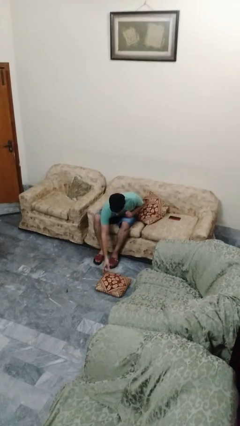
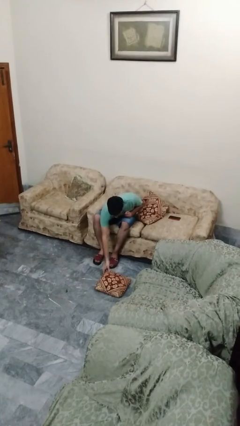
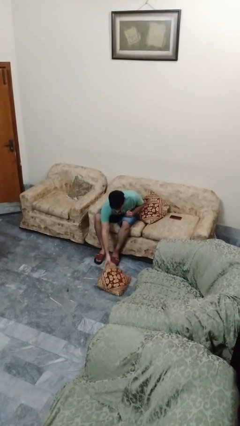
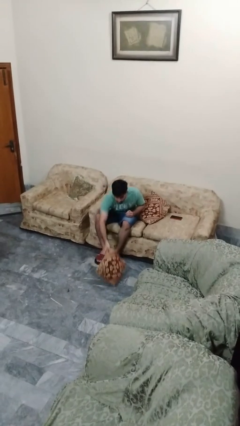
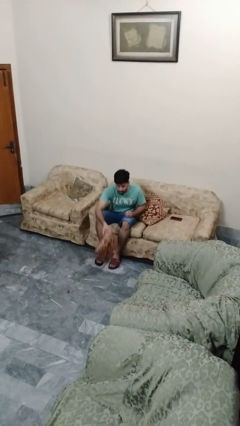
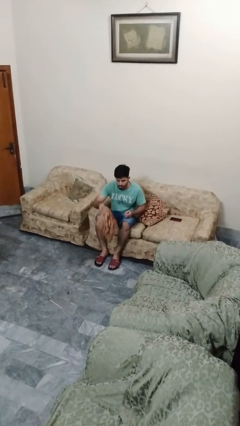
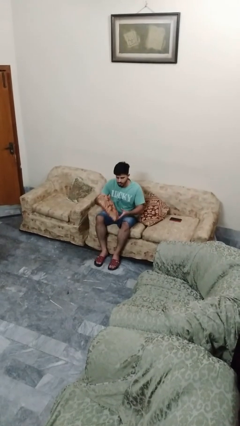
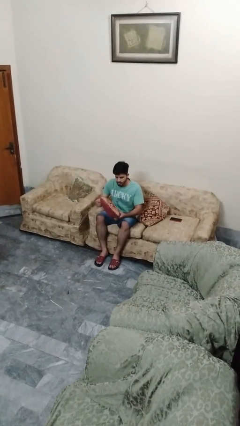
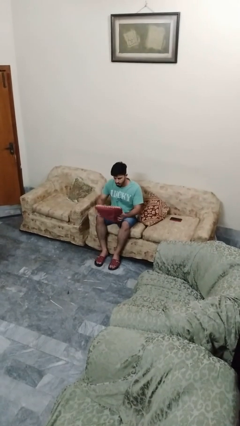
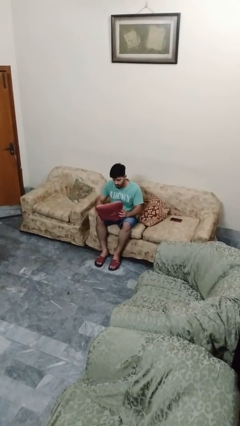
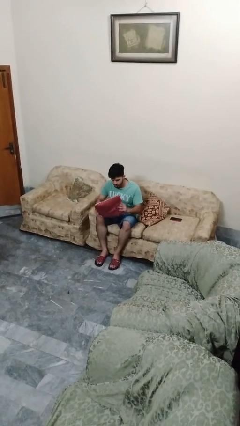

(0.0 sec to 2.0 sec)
person picks up object from floor

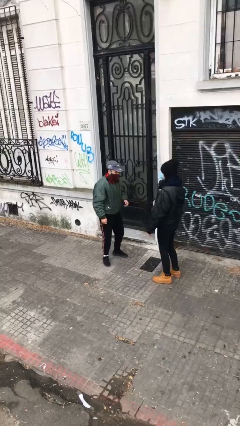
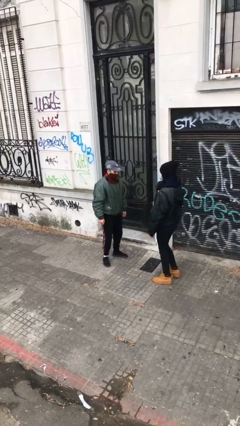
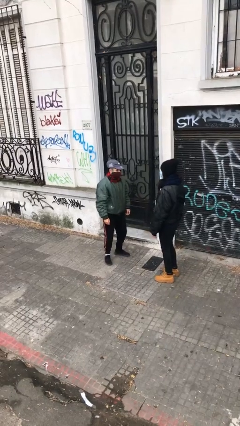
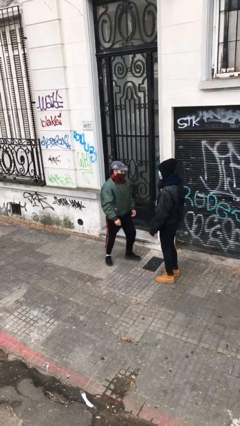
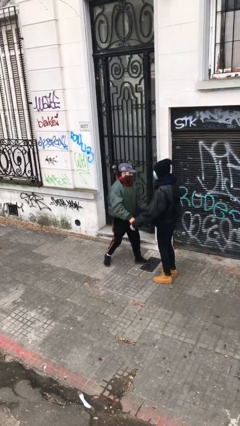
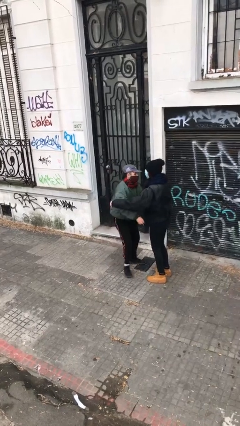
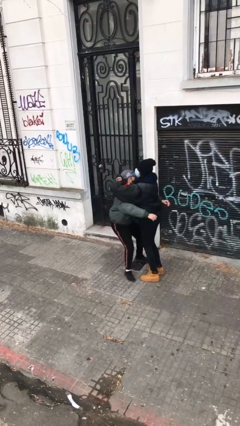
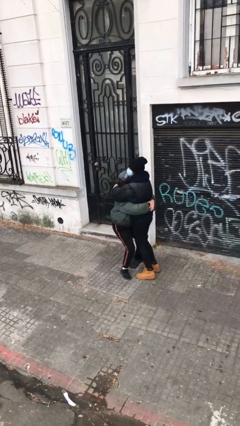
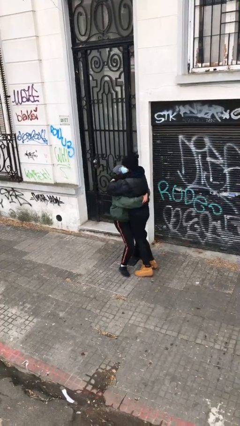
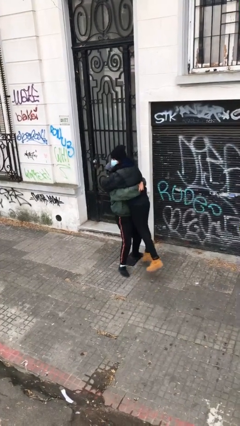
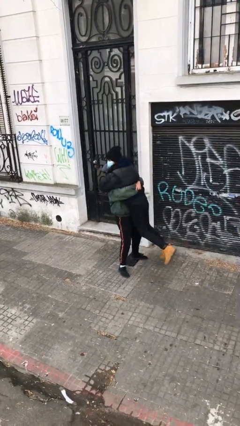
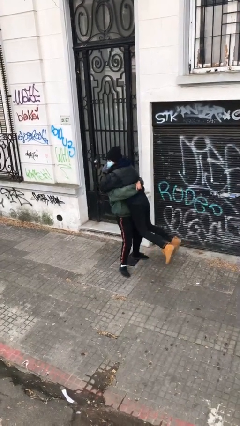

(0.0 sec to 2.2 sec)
person picks up person

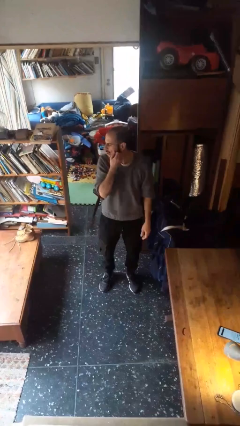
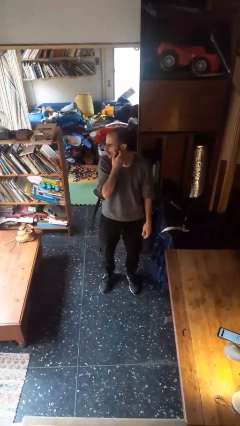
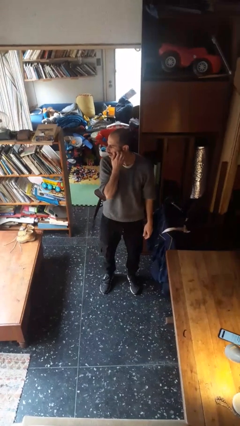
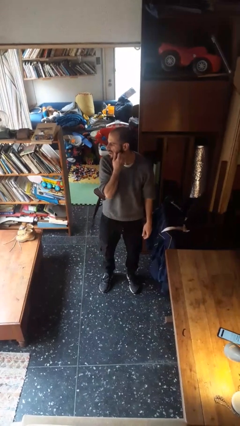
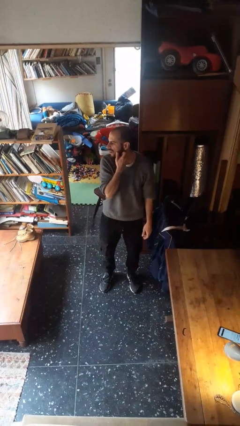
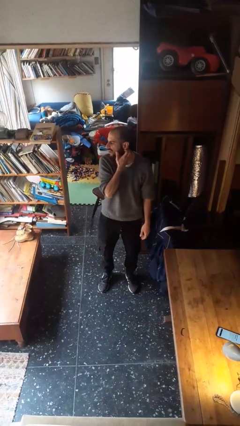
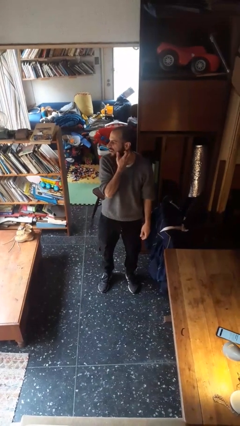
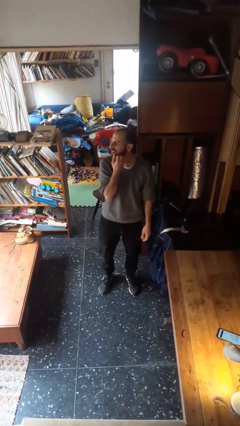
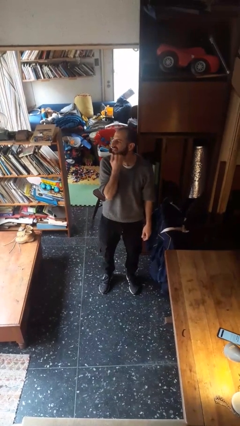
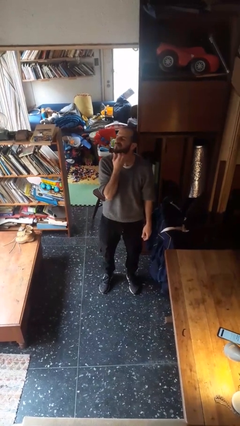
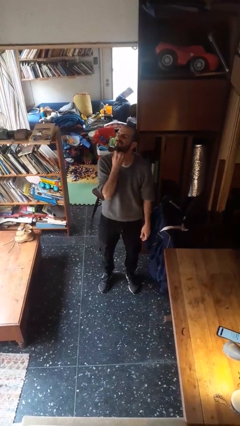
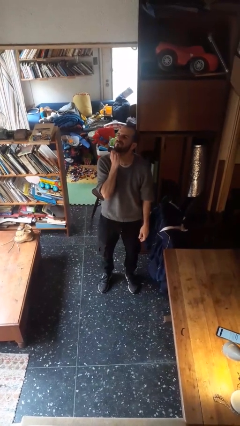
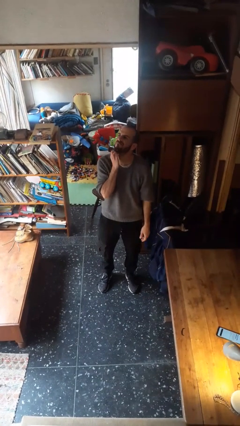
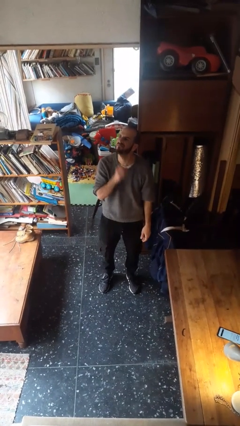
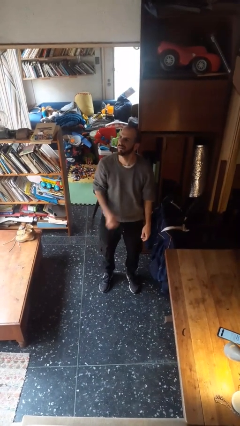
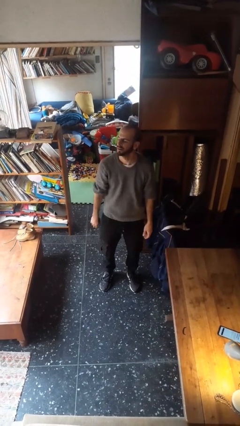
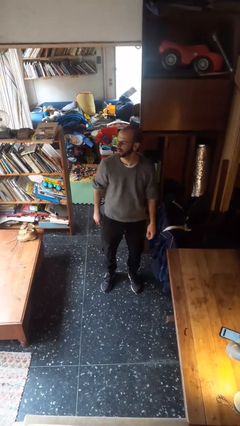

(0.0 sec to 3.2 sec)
person scratches face

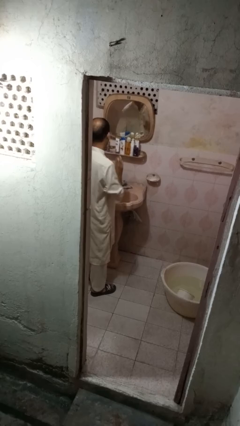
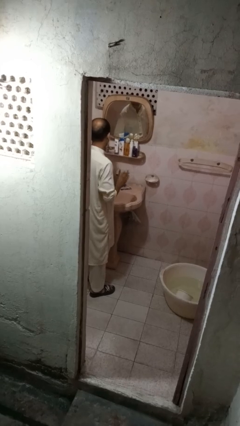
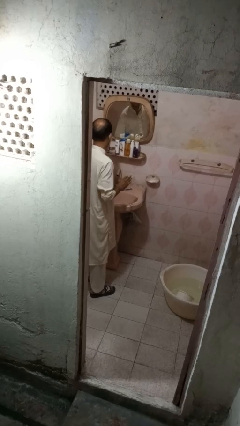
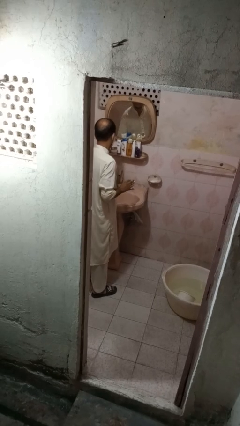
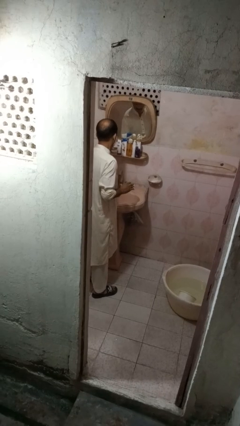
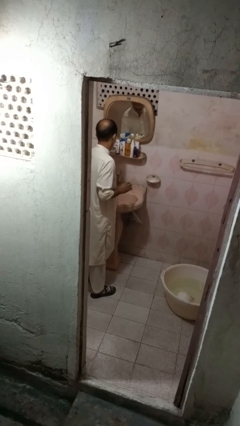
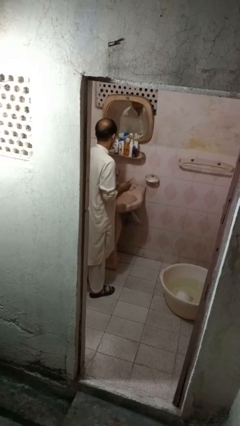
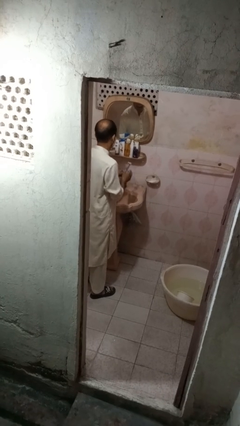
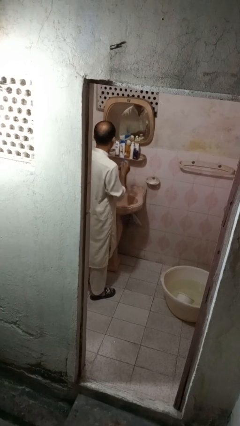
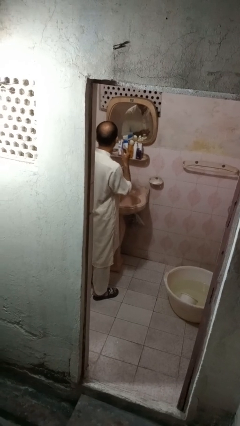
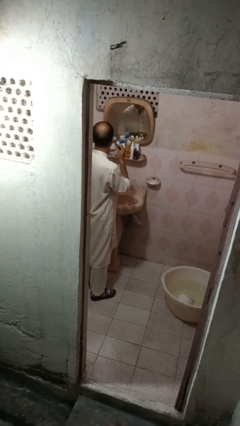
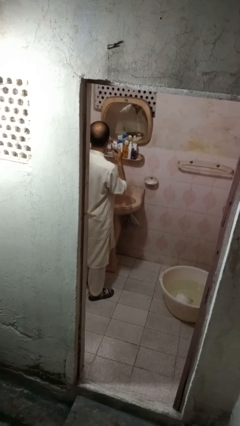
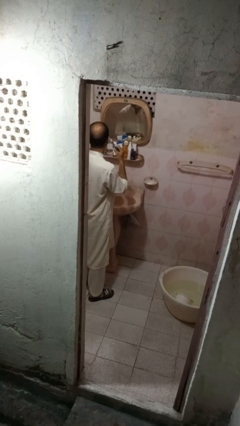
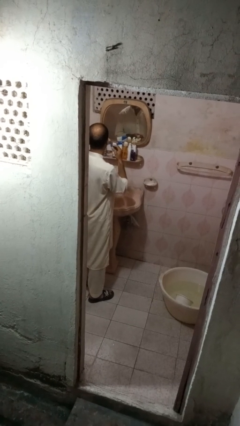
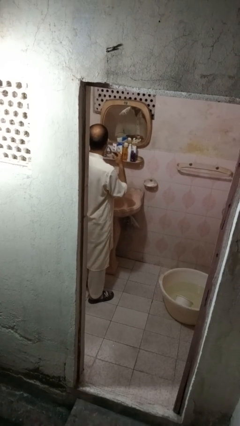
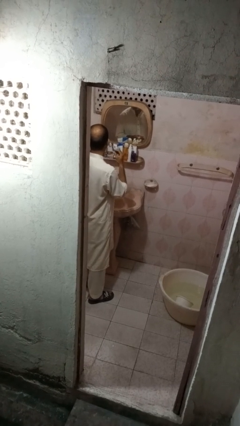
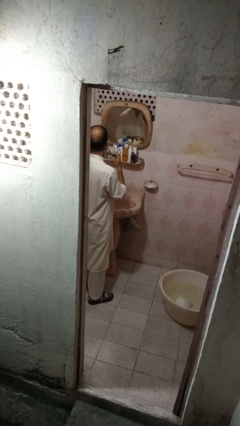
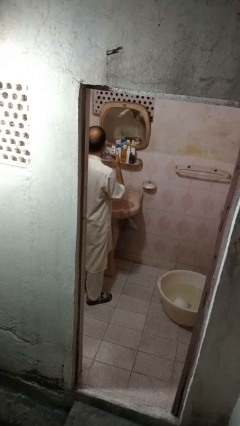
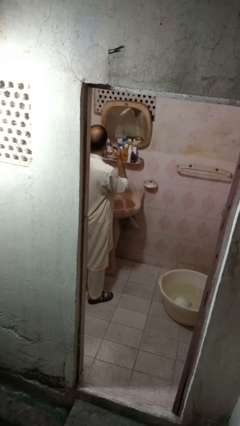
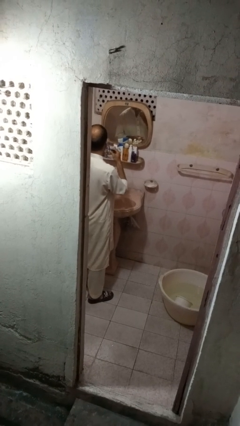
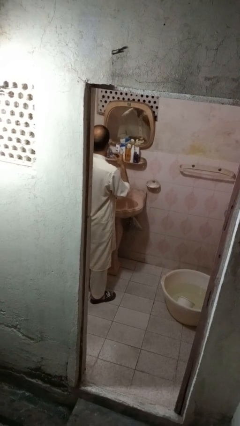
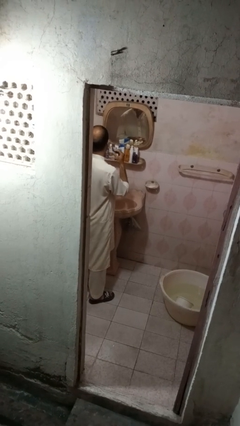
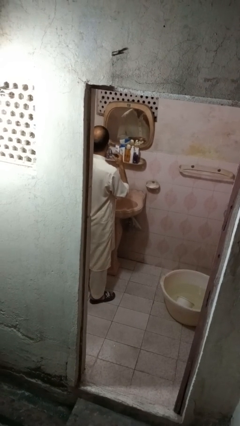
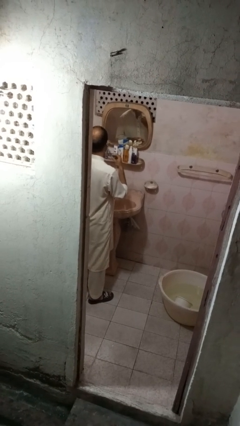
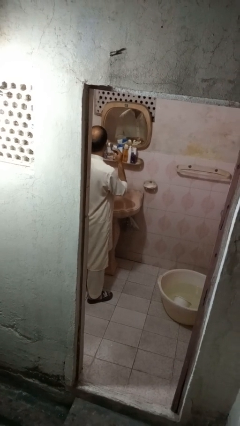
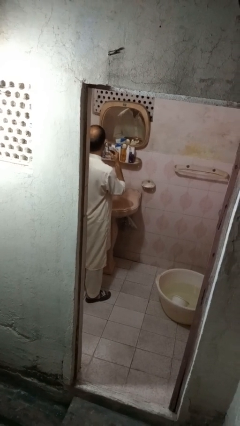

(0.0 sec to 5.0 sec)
person shaves face

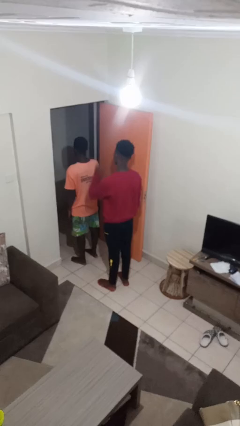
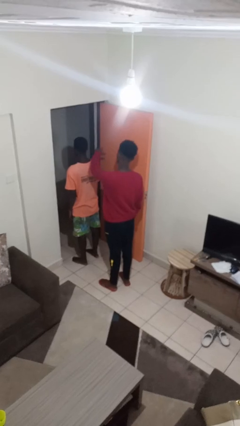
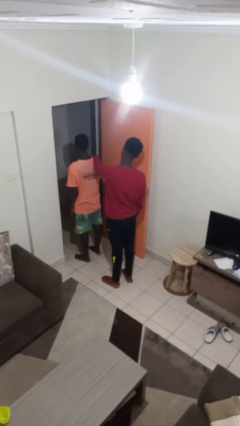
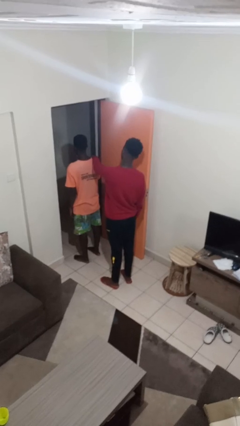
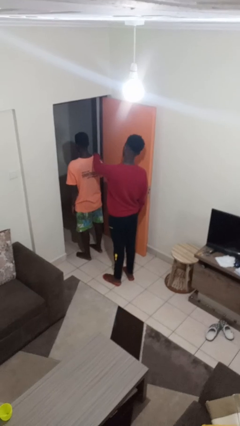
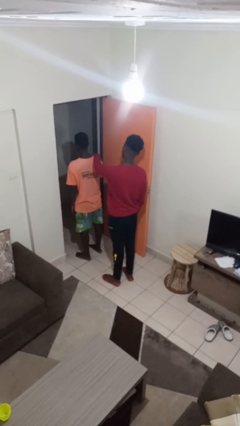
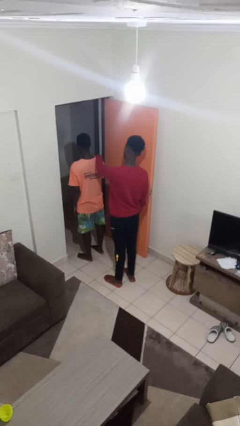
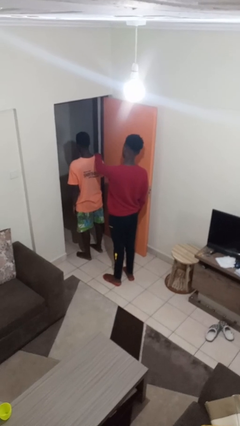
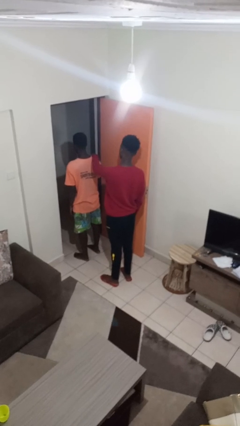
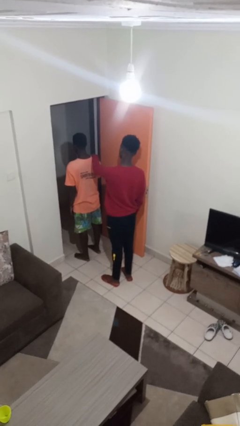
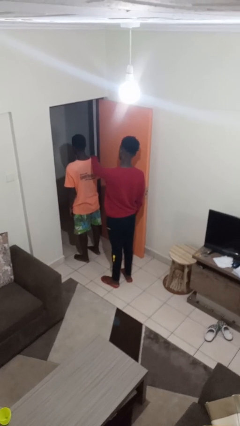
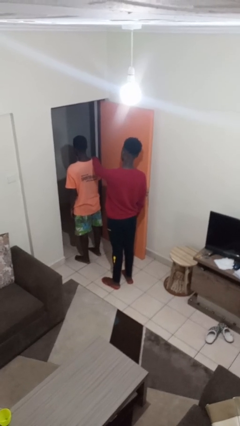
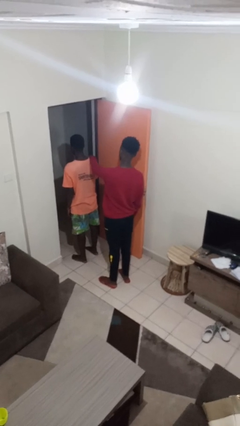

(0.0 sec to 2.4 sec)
person grabs person by shoulder

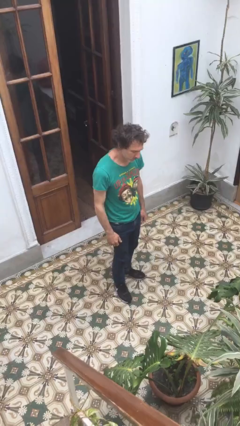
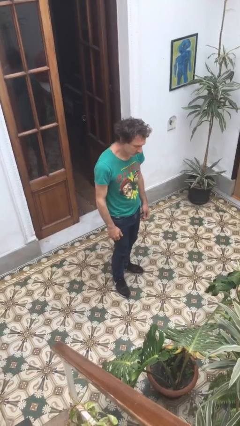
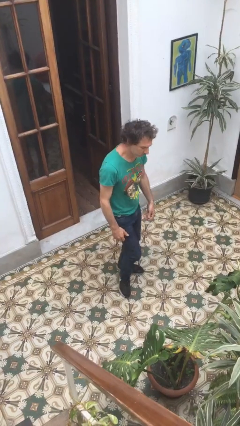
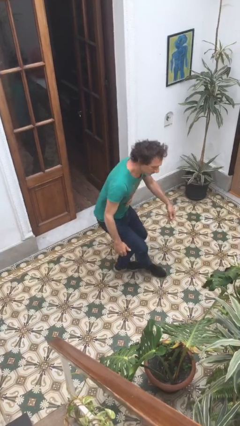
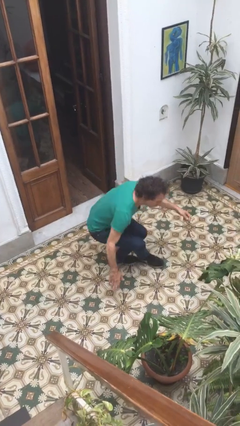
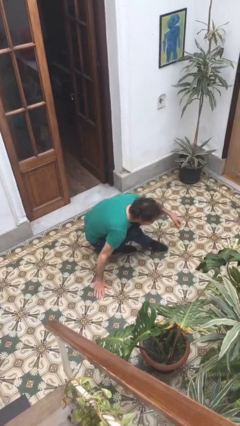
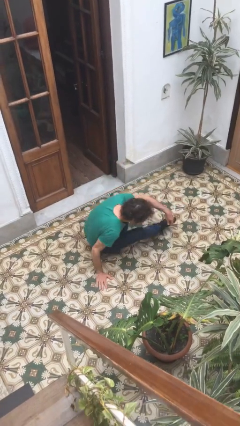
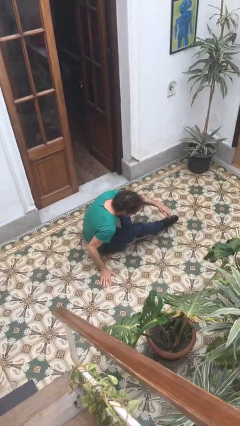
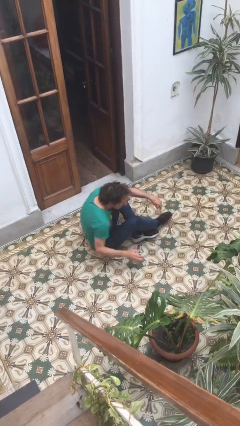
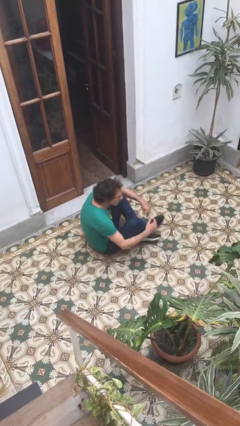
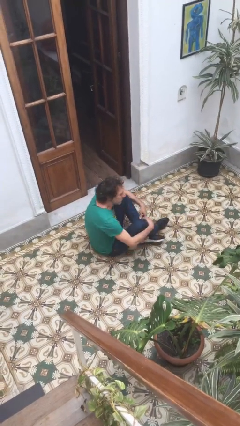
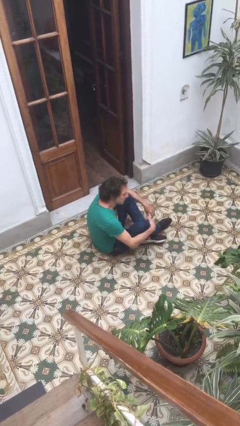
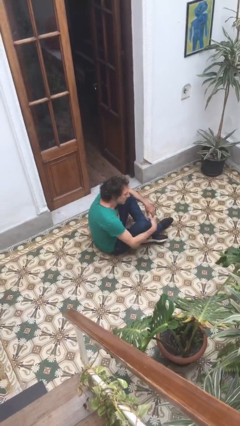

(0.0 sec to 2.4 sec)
person sits down

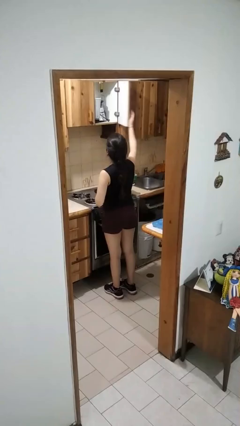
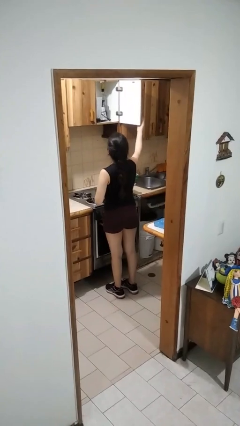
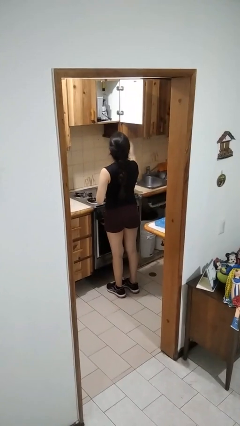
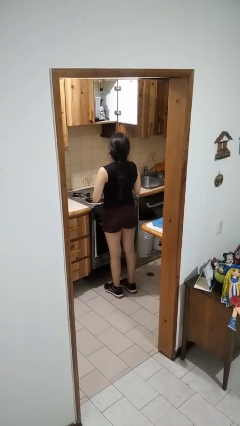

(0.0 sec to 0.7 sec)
person opens cabinet
